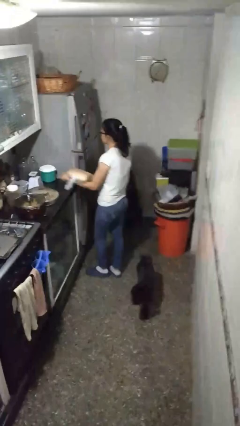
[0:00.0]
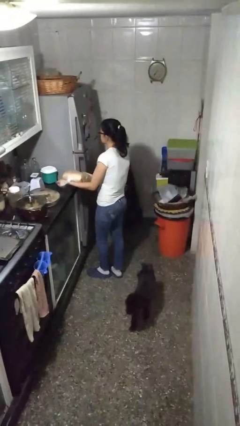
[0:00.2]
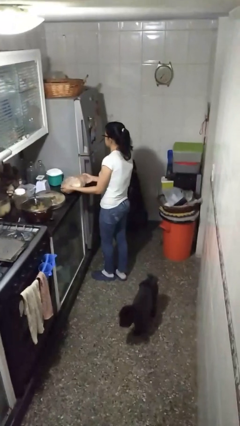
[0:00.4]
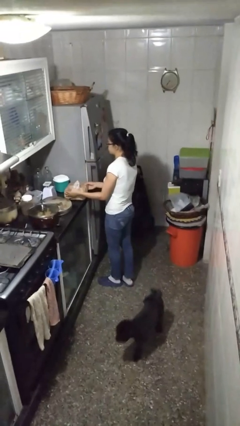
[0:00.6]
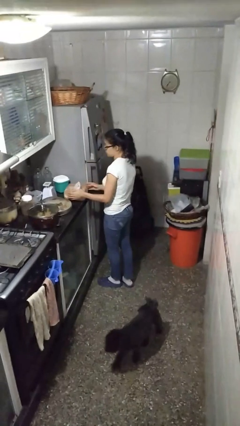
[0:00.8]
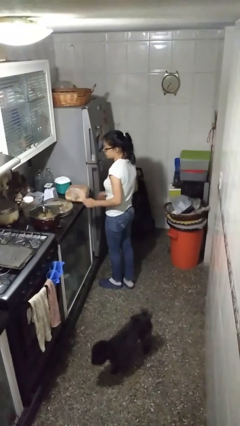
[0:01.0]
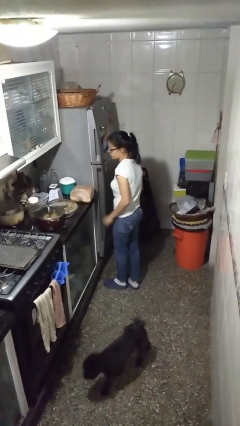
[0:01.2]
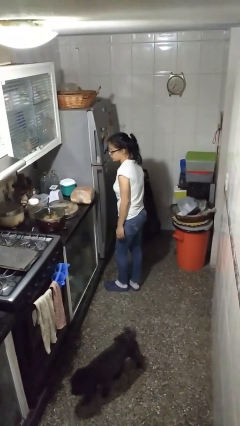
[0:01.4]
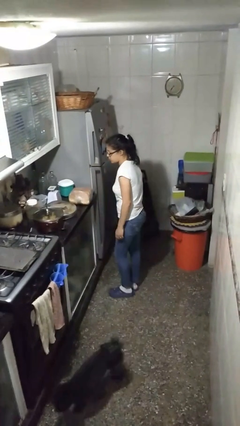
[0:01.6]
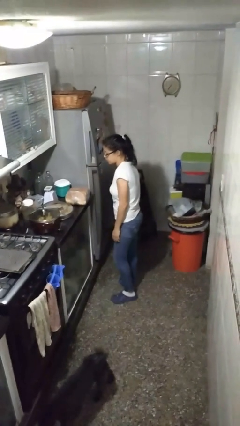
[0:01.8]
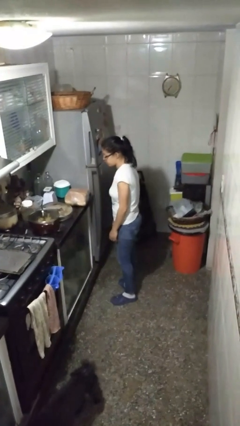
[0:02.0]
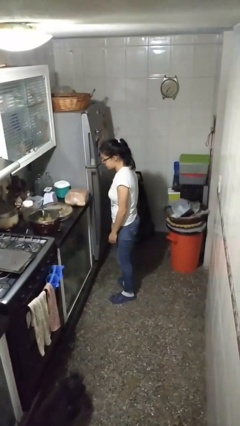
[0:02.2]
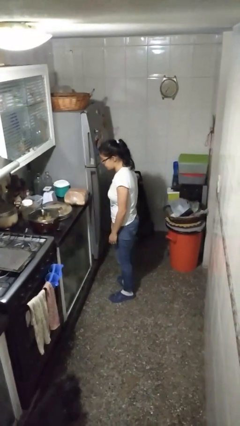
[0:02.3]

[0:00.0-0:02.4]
person puts down object on countertop

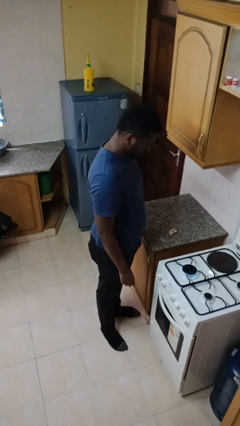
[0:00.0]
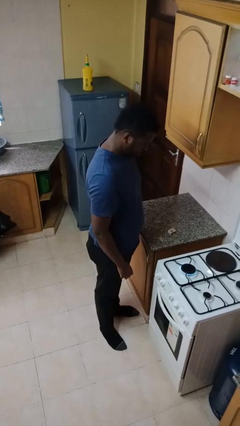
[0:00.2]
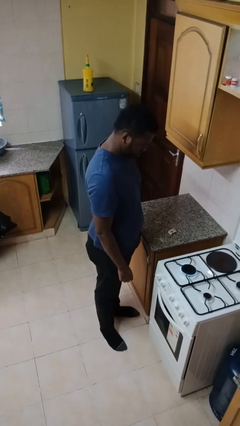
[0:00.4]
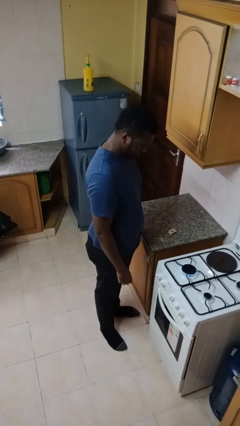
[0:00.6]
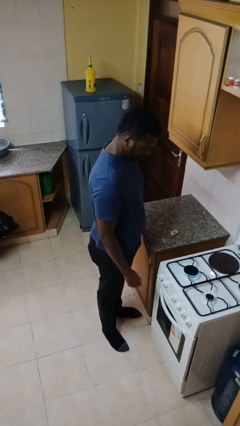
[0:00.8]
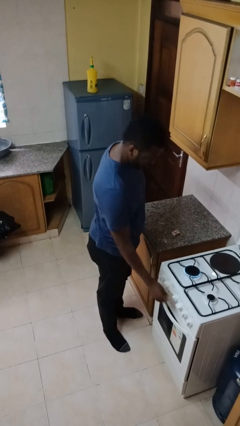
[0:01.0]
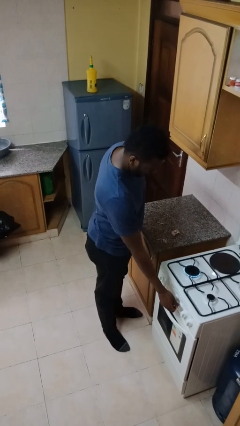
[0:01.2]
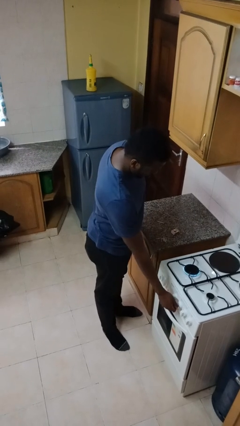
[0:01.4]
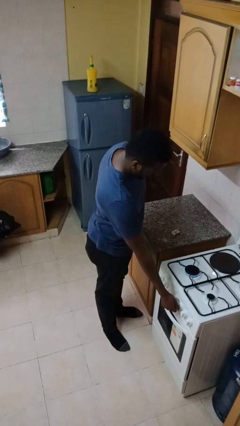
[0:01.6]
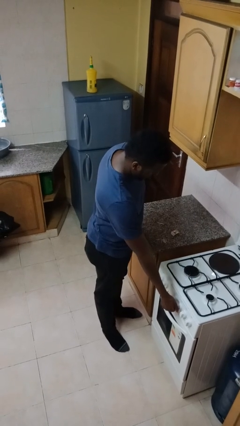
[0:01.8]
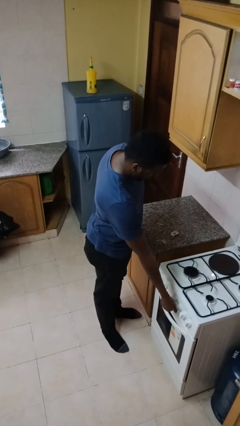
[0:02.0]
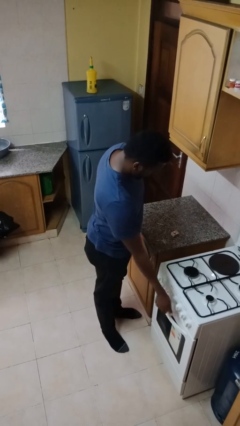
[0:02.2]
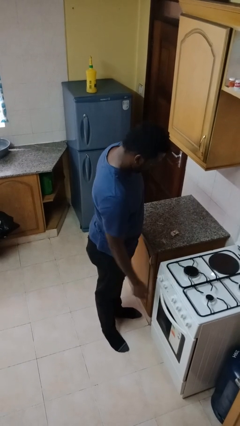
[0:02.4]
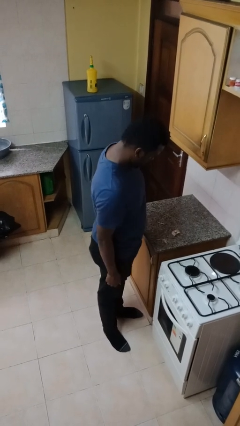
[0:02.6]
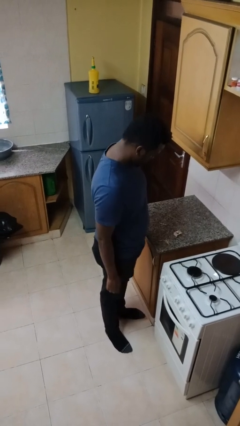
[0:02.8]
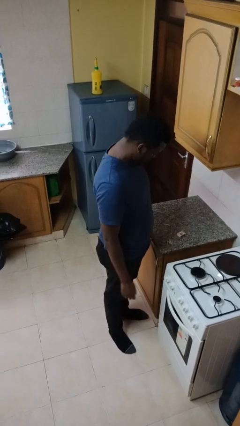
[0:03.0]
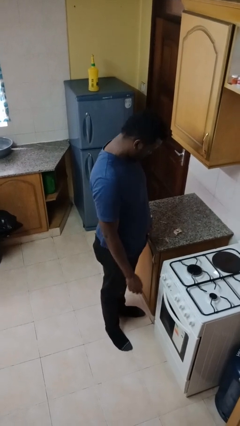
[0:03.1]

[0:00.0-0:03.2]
person turns off stovetop

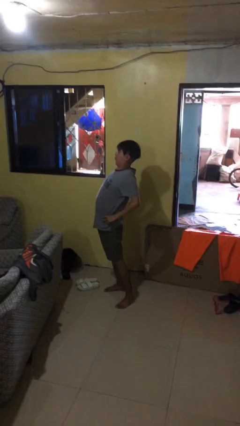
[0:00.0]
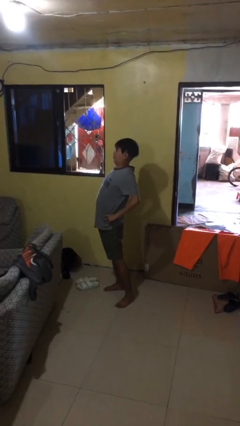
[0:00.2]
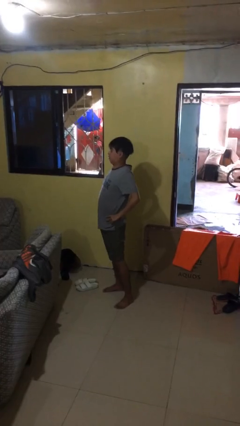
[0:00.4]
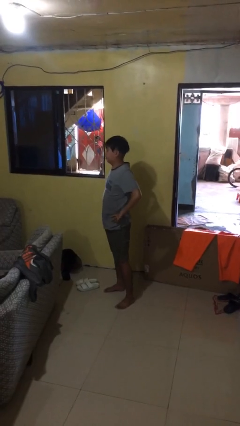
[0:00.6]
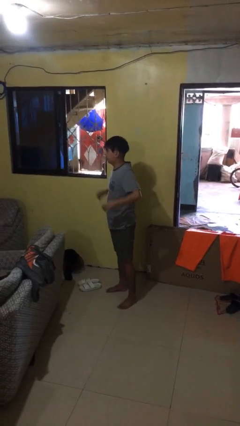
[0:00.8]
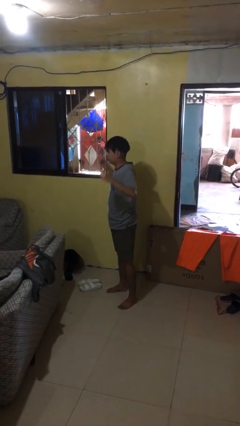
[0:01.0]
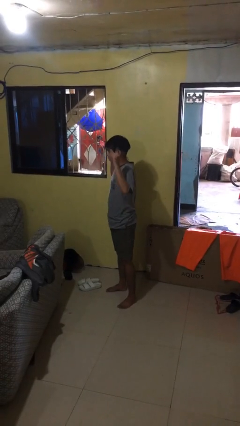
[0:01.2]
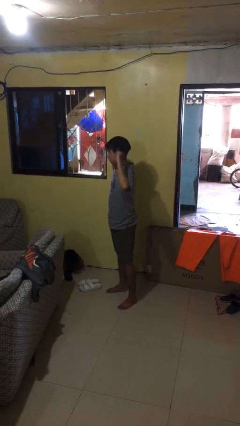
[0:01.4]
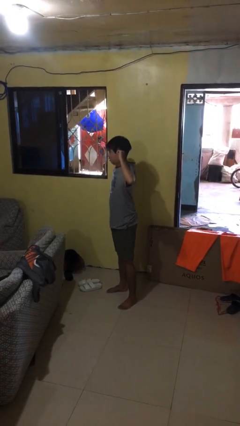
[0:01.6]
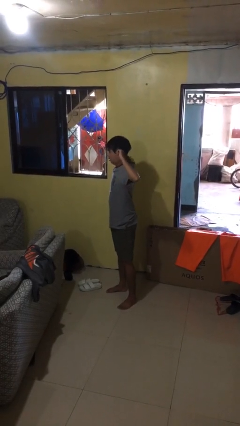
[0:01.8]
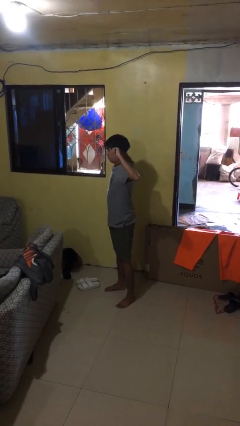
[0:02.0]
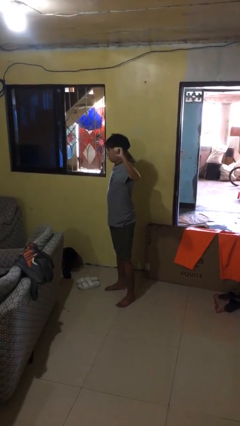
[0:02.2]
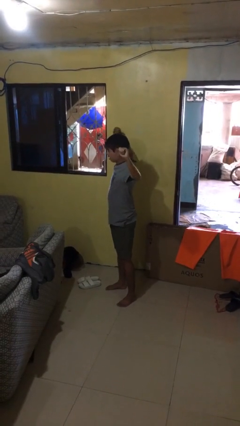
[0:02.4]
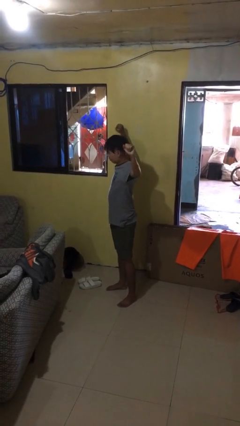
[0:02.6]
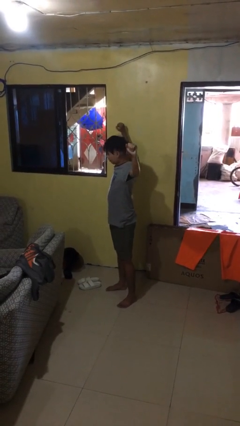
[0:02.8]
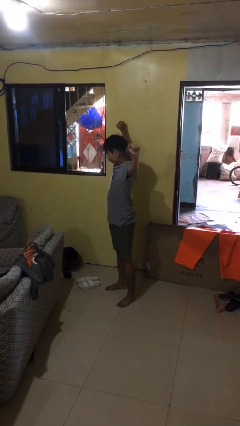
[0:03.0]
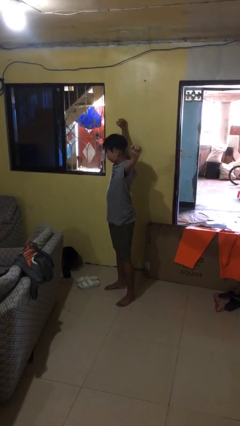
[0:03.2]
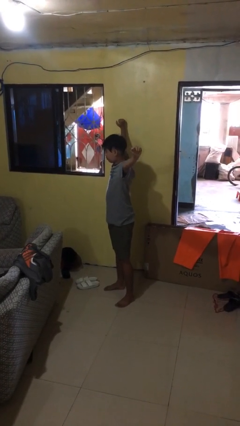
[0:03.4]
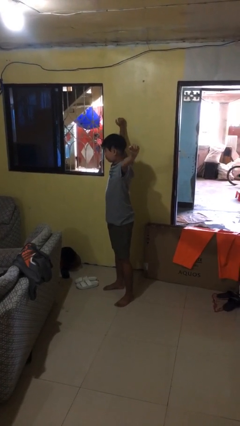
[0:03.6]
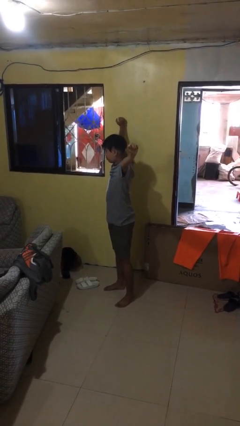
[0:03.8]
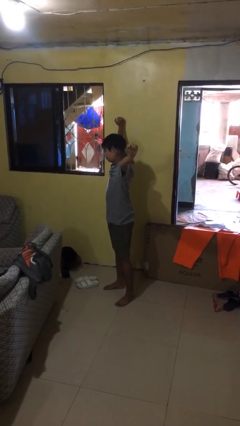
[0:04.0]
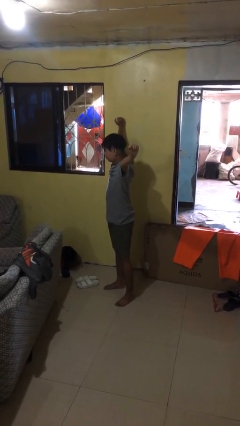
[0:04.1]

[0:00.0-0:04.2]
person stretches arms to side

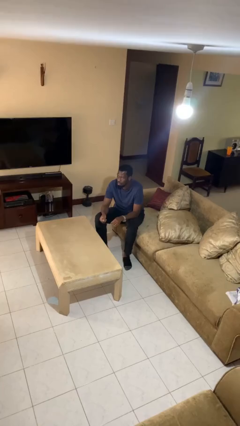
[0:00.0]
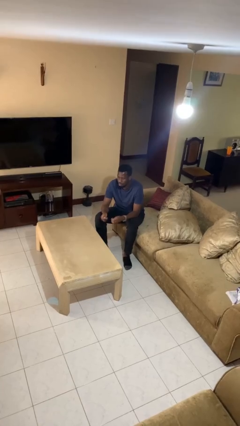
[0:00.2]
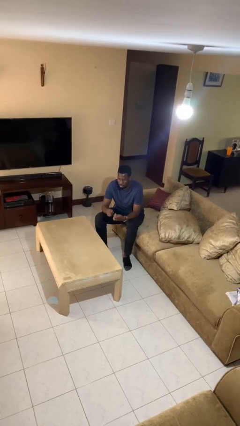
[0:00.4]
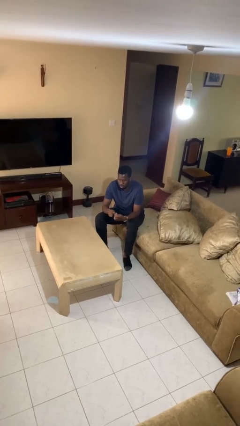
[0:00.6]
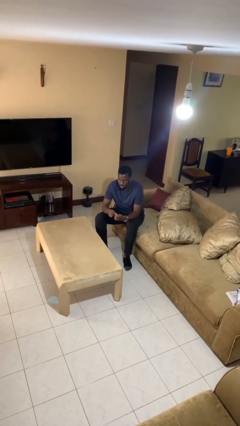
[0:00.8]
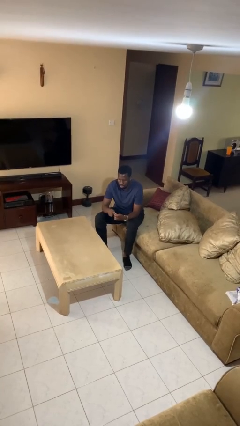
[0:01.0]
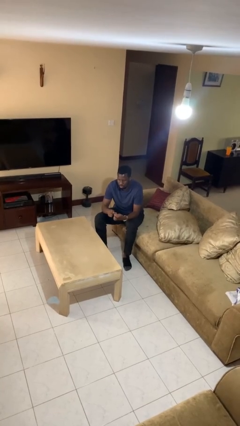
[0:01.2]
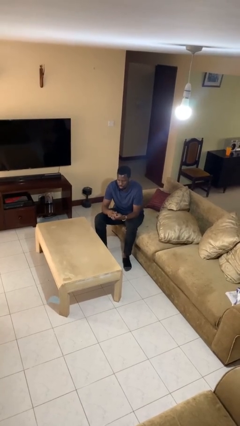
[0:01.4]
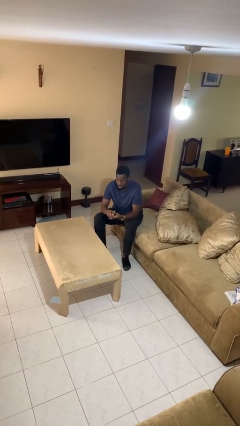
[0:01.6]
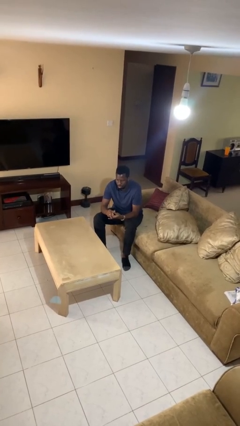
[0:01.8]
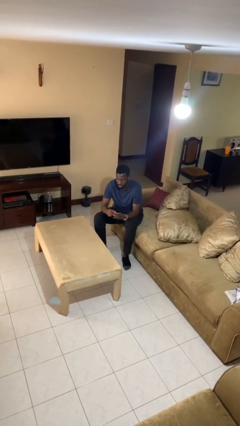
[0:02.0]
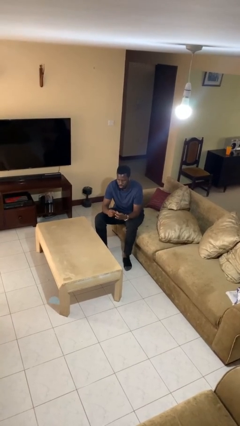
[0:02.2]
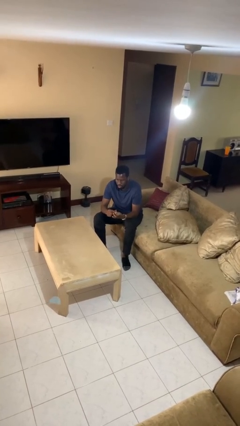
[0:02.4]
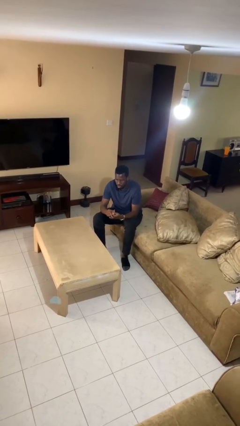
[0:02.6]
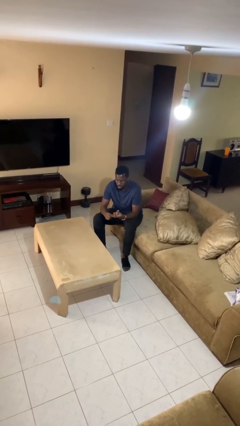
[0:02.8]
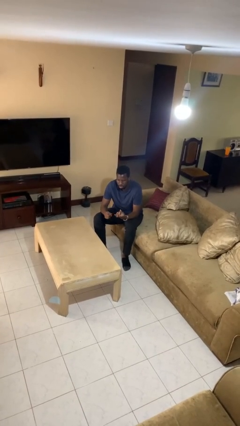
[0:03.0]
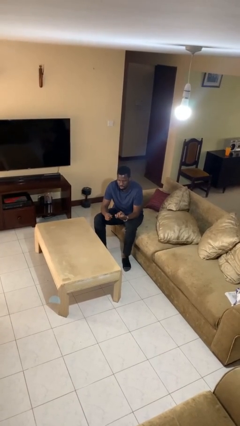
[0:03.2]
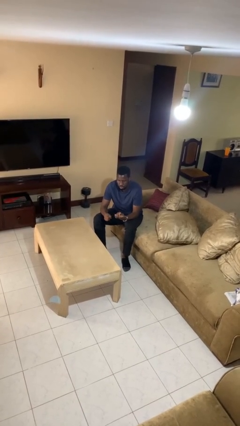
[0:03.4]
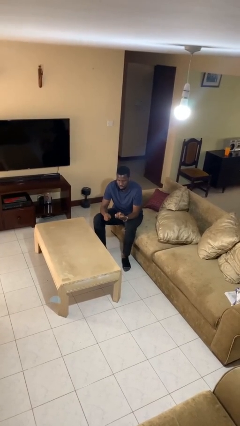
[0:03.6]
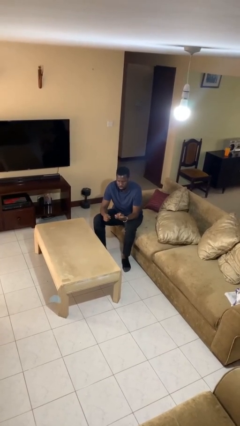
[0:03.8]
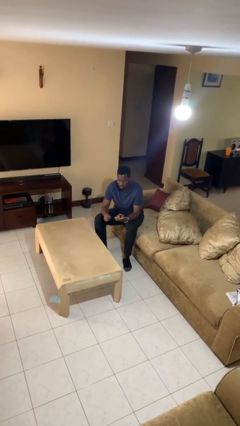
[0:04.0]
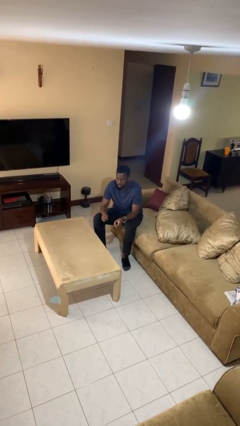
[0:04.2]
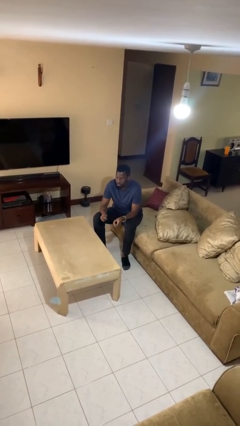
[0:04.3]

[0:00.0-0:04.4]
person files fingernails

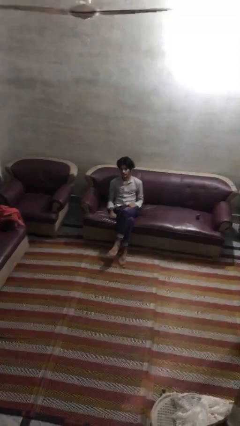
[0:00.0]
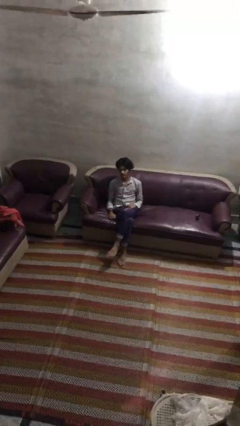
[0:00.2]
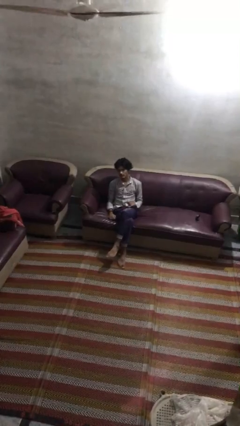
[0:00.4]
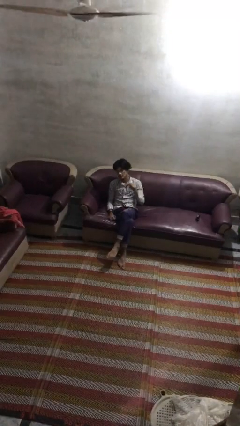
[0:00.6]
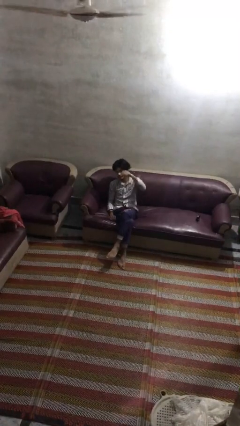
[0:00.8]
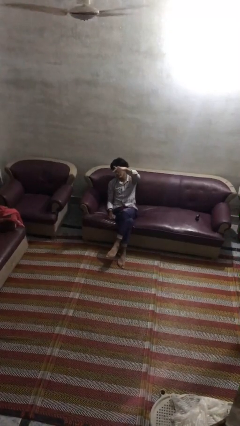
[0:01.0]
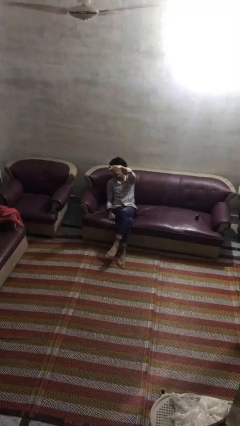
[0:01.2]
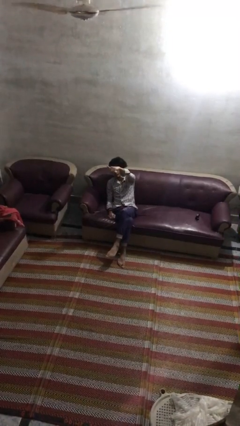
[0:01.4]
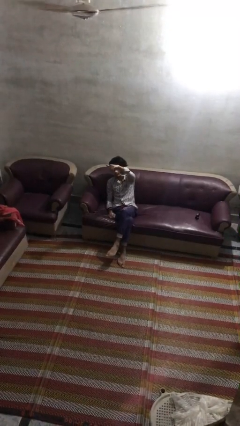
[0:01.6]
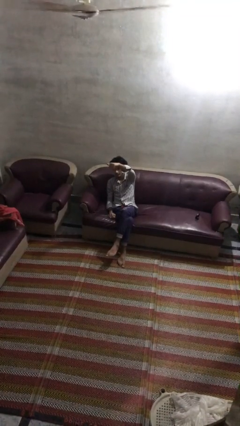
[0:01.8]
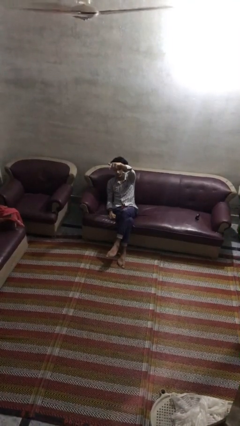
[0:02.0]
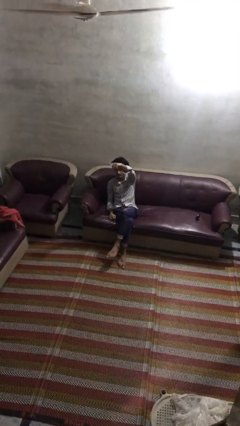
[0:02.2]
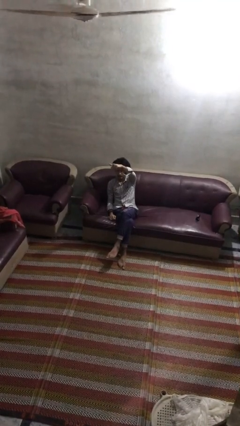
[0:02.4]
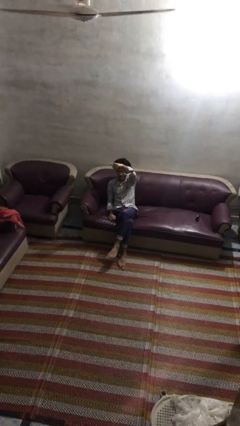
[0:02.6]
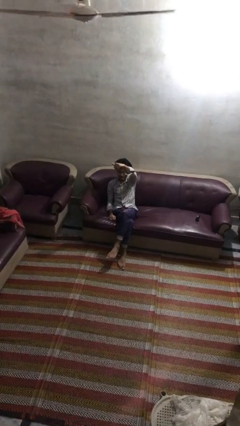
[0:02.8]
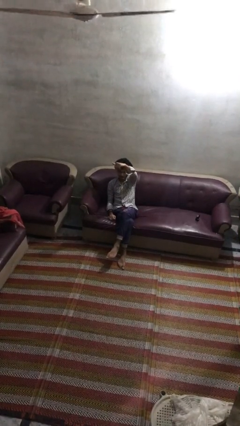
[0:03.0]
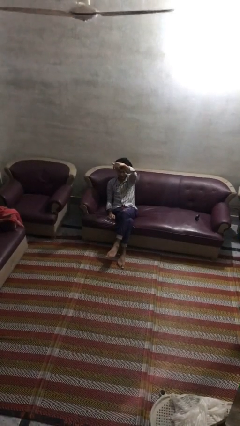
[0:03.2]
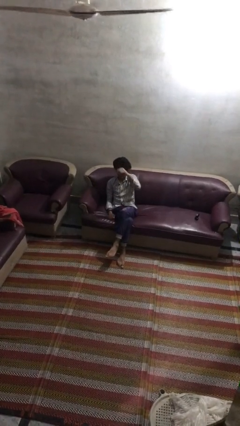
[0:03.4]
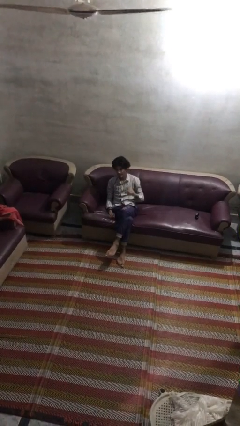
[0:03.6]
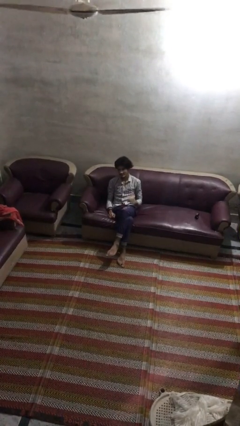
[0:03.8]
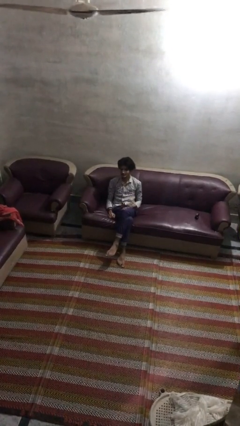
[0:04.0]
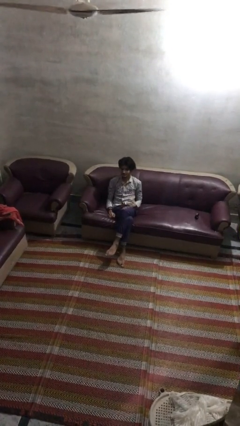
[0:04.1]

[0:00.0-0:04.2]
person gestures come here
